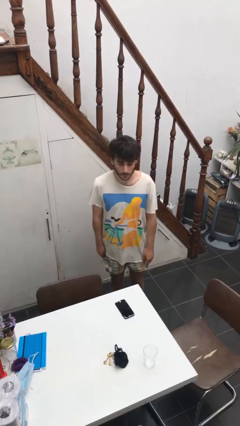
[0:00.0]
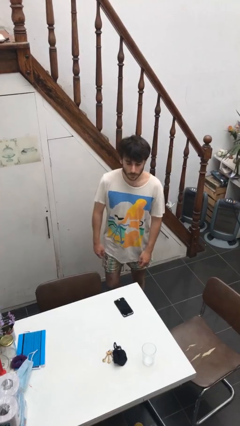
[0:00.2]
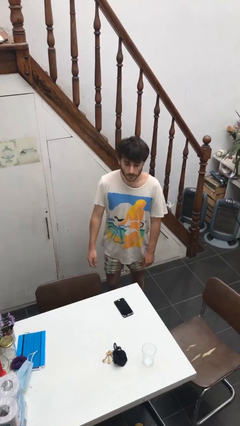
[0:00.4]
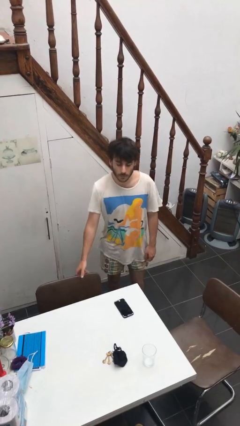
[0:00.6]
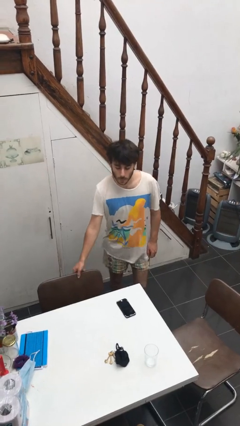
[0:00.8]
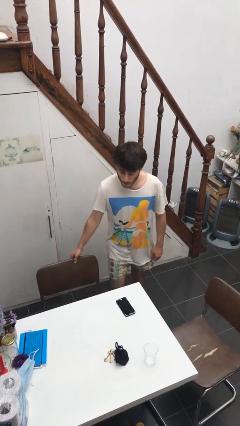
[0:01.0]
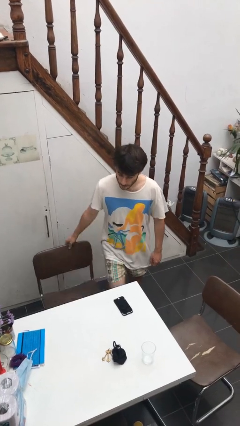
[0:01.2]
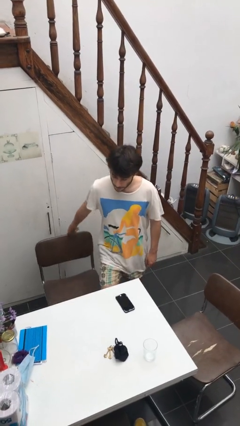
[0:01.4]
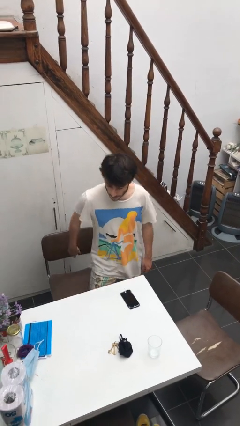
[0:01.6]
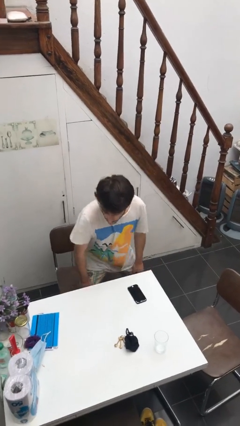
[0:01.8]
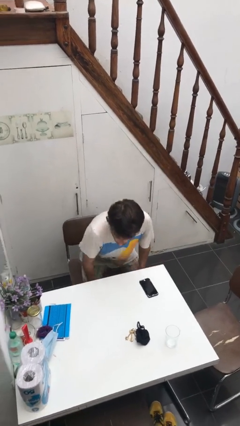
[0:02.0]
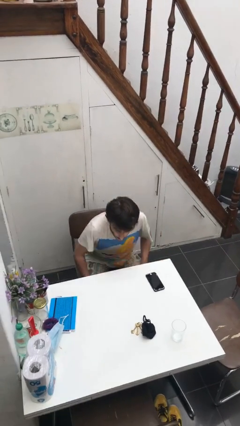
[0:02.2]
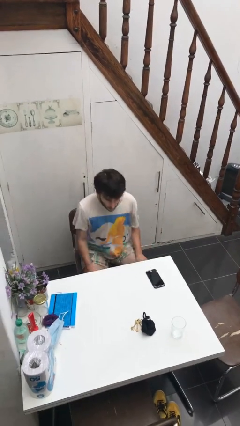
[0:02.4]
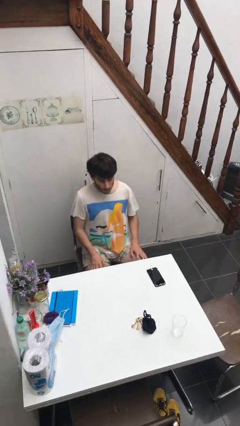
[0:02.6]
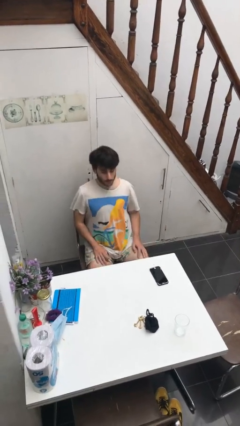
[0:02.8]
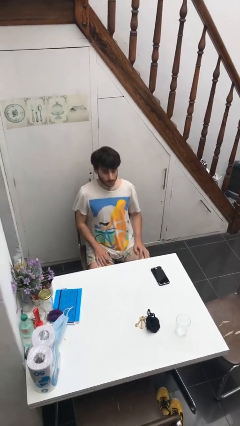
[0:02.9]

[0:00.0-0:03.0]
person sits down

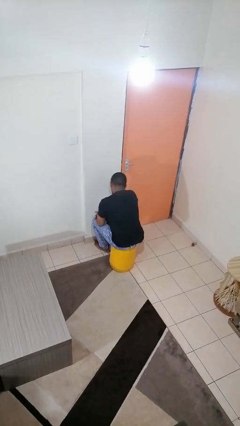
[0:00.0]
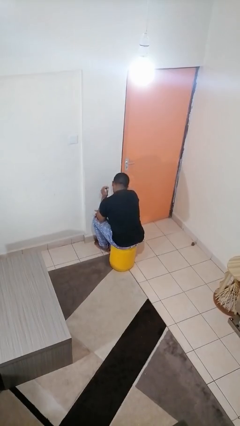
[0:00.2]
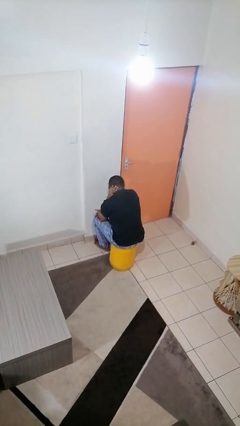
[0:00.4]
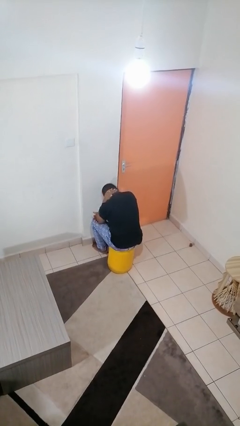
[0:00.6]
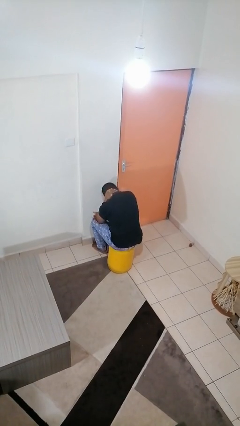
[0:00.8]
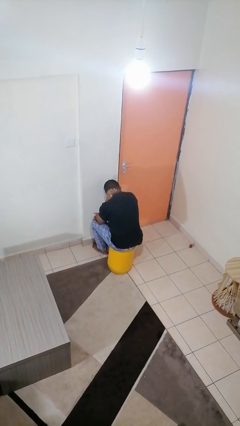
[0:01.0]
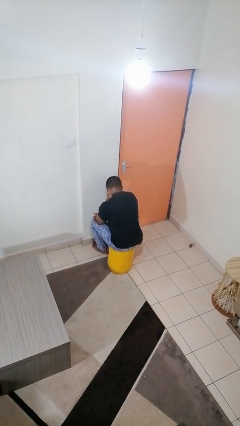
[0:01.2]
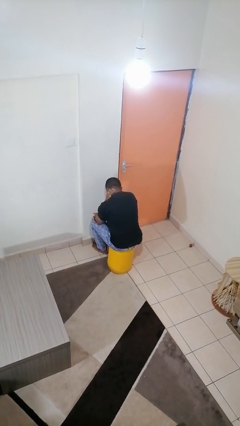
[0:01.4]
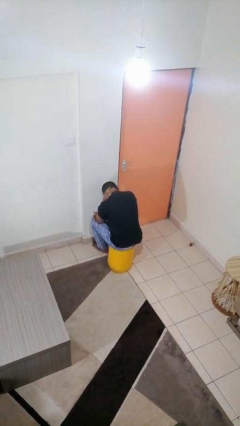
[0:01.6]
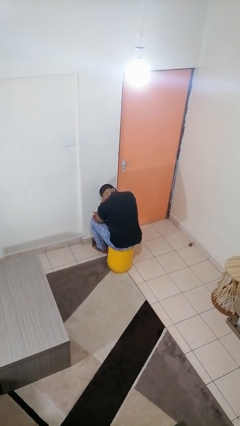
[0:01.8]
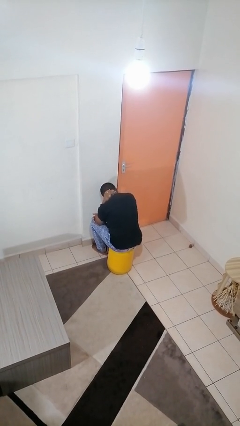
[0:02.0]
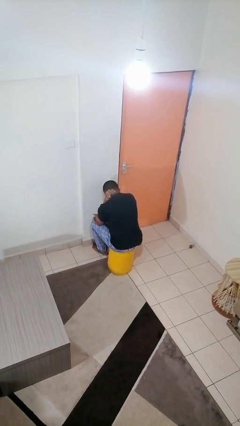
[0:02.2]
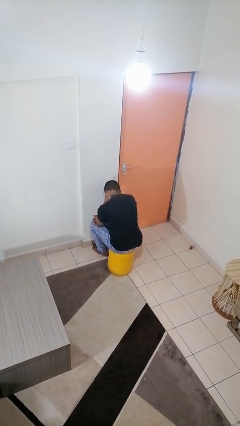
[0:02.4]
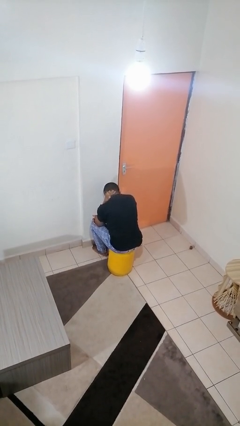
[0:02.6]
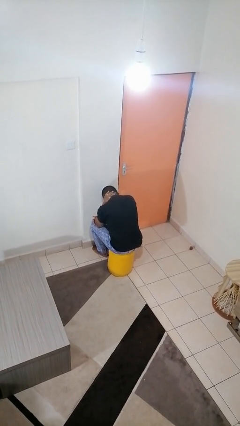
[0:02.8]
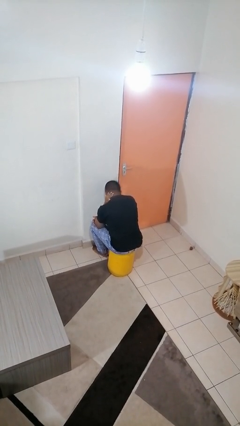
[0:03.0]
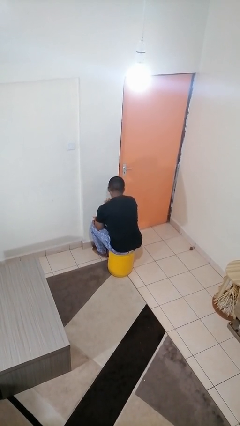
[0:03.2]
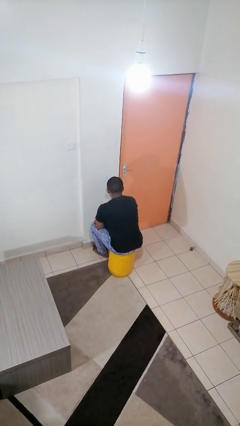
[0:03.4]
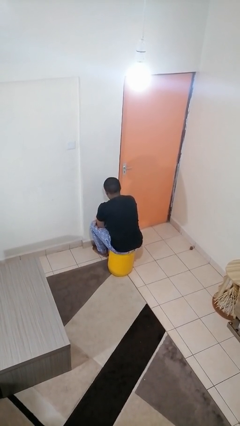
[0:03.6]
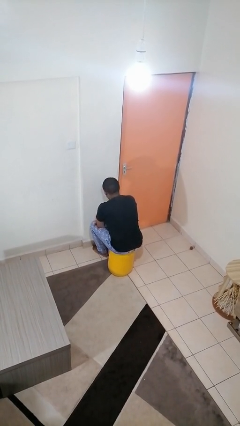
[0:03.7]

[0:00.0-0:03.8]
person rubs neck

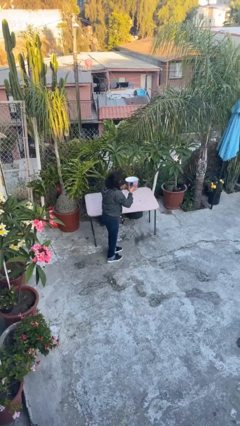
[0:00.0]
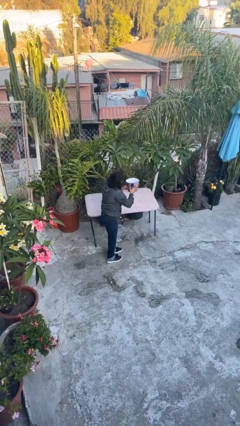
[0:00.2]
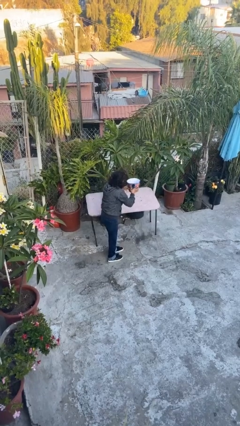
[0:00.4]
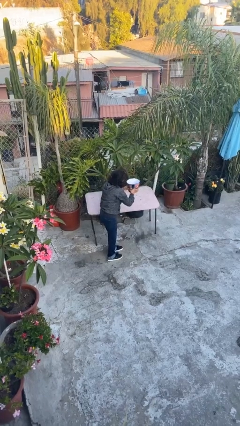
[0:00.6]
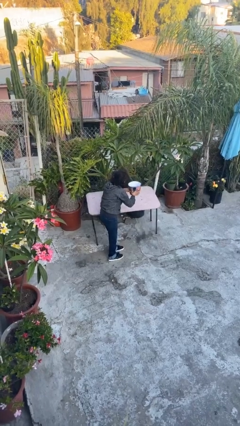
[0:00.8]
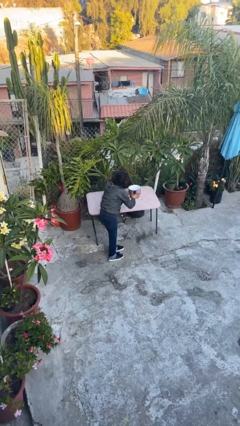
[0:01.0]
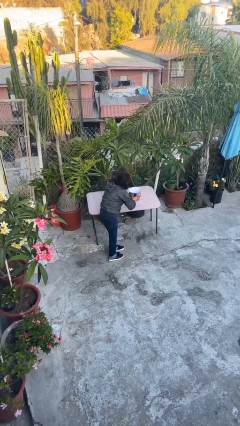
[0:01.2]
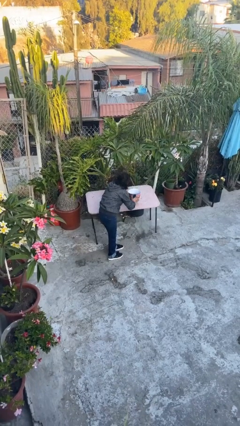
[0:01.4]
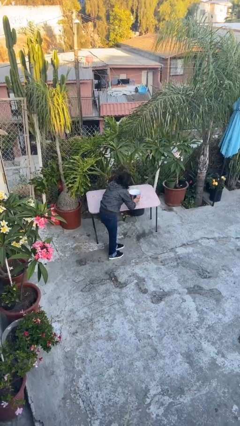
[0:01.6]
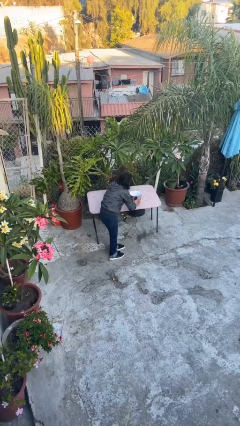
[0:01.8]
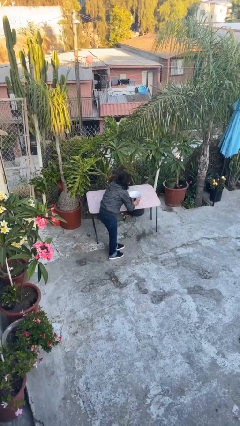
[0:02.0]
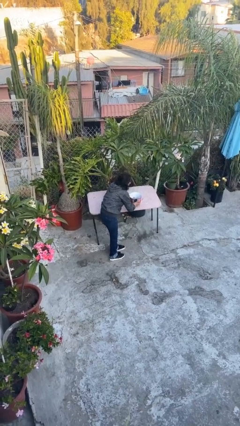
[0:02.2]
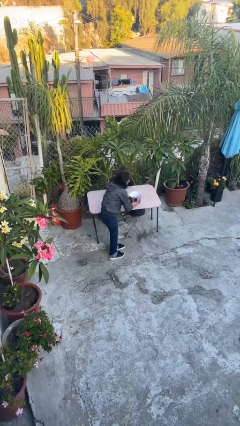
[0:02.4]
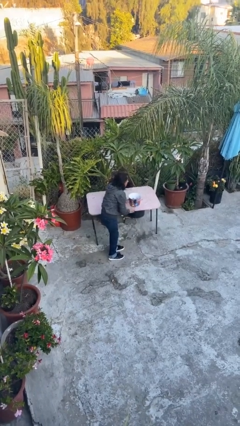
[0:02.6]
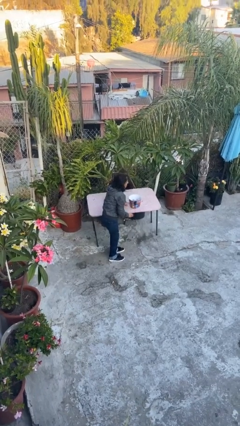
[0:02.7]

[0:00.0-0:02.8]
person puts down object on table

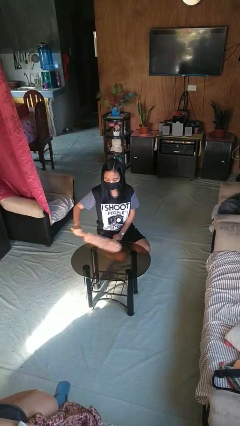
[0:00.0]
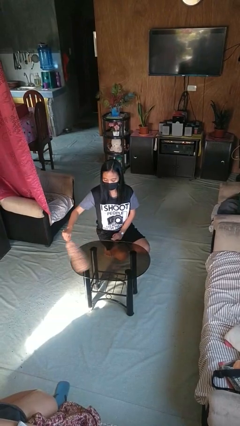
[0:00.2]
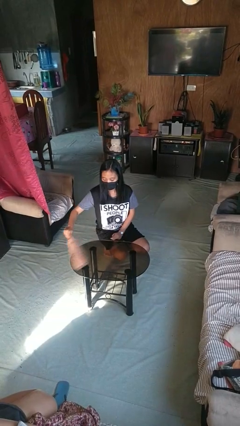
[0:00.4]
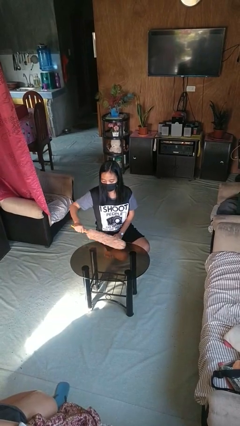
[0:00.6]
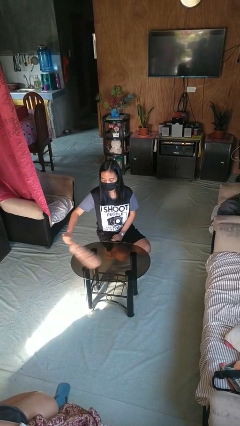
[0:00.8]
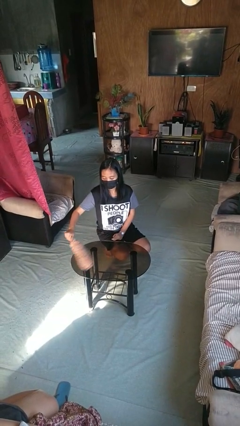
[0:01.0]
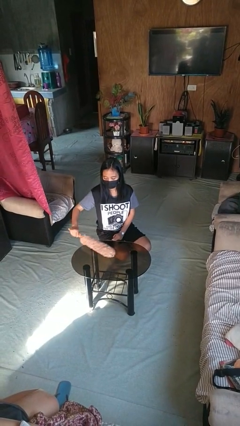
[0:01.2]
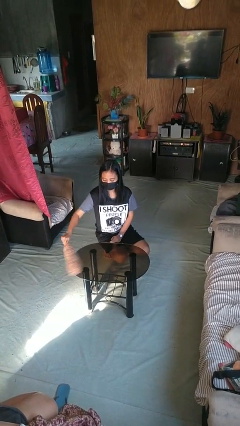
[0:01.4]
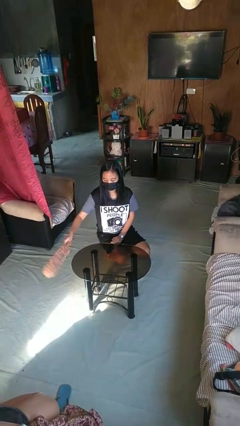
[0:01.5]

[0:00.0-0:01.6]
person dusts furniture

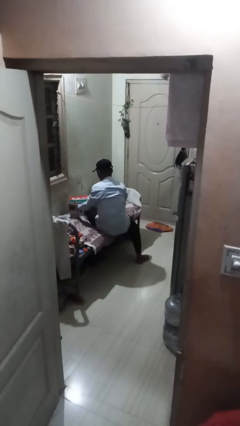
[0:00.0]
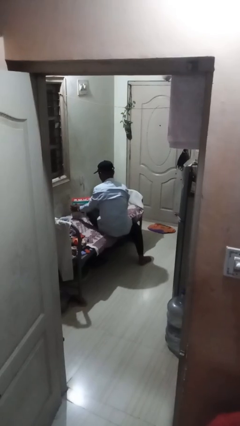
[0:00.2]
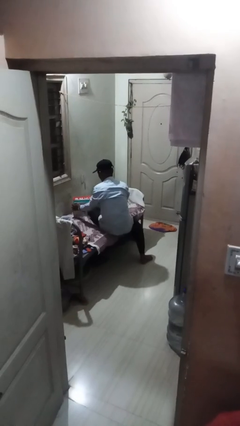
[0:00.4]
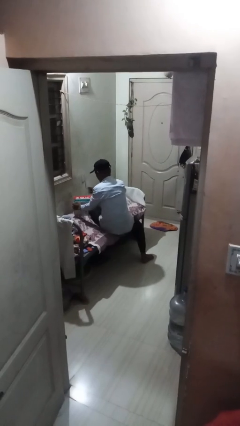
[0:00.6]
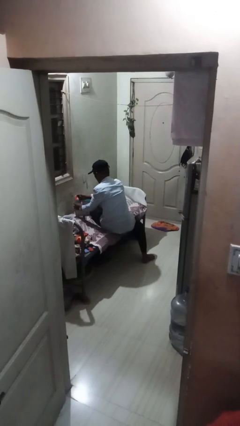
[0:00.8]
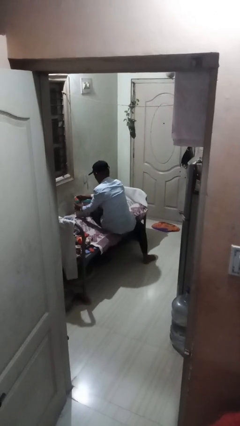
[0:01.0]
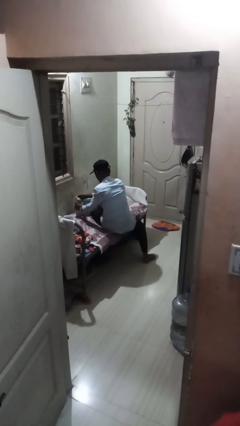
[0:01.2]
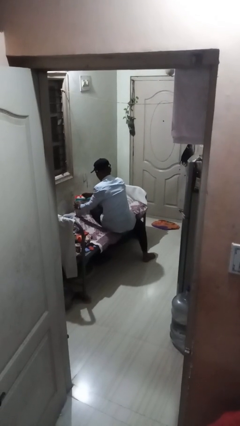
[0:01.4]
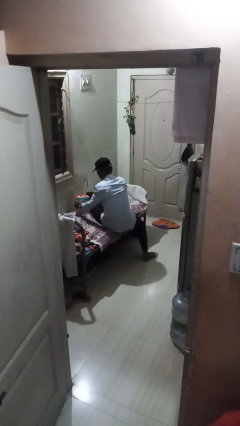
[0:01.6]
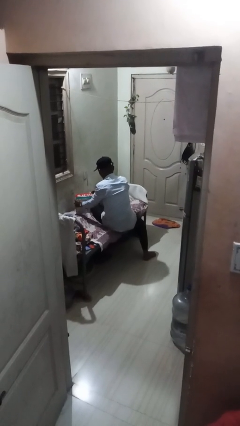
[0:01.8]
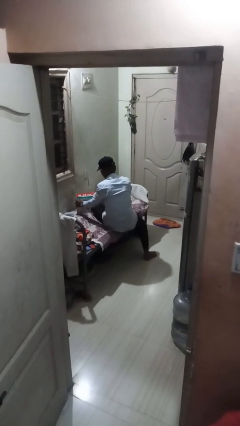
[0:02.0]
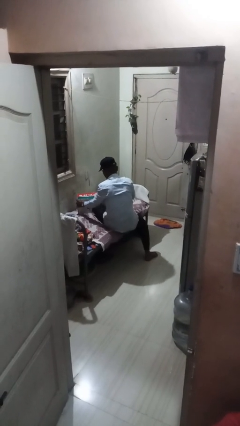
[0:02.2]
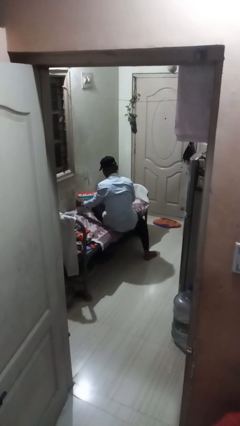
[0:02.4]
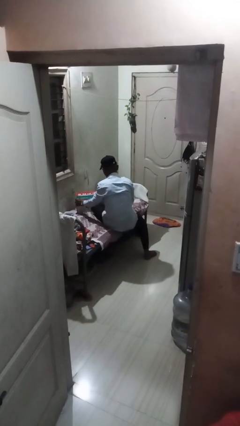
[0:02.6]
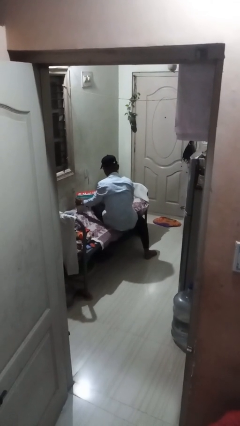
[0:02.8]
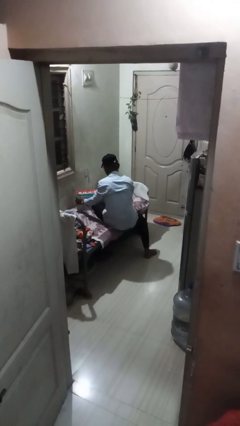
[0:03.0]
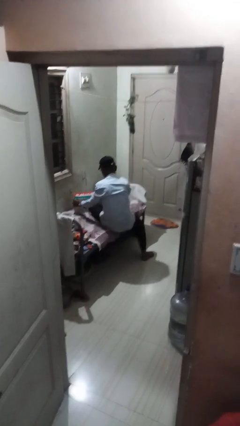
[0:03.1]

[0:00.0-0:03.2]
person wraps box

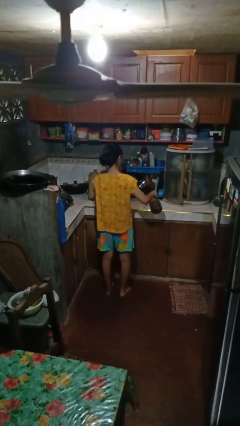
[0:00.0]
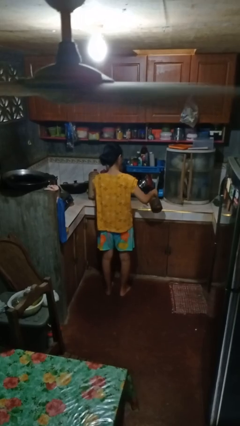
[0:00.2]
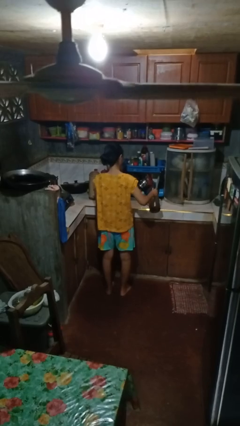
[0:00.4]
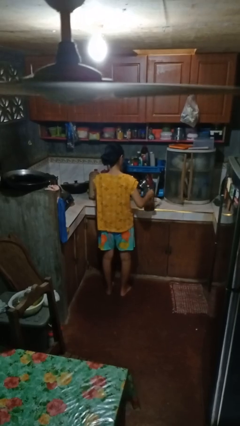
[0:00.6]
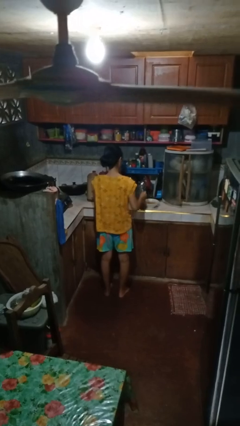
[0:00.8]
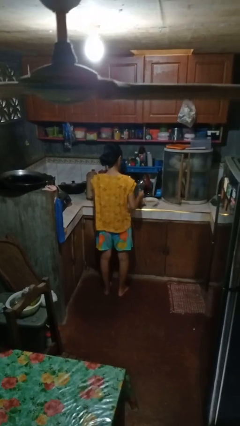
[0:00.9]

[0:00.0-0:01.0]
person pours into bowl

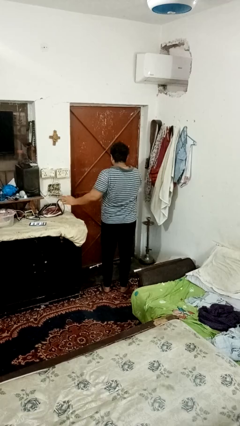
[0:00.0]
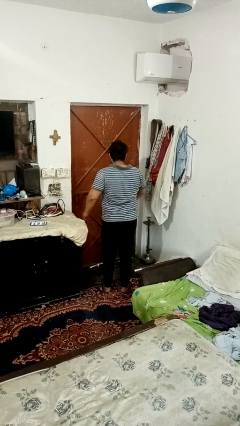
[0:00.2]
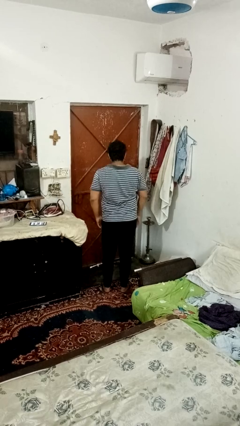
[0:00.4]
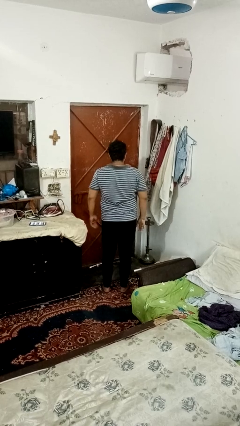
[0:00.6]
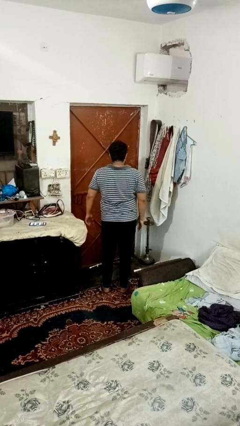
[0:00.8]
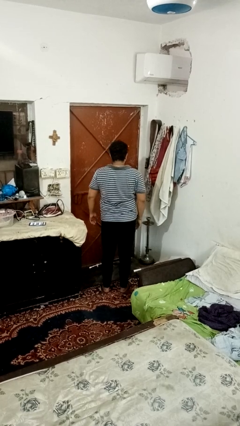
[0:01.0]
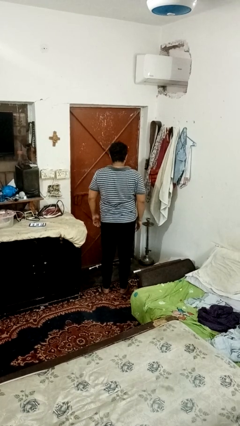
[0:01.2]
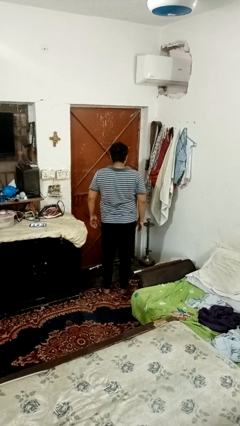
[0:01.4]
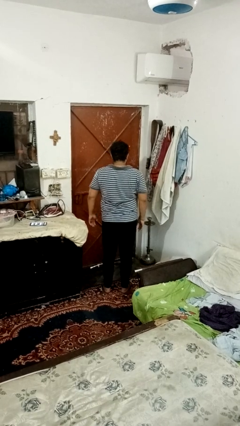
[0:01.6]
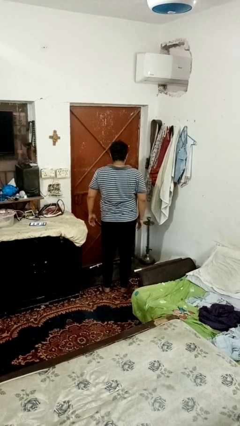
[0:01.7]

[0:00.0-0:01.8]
person dances in place
